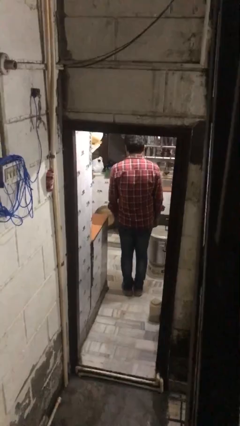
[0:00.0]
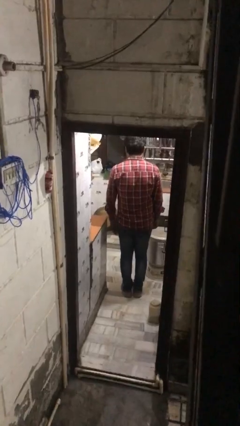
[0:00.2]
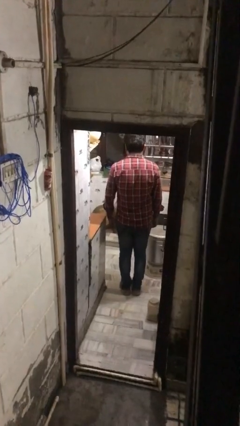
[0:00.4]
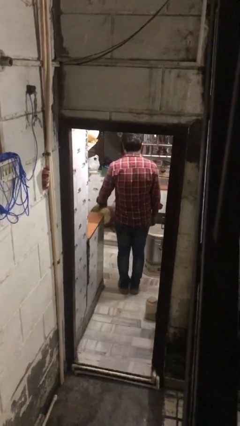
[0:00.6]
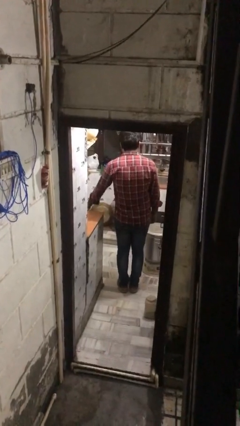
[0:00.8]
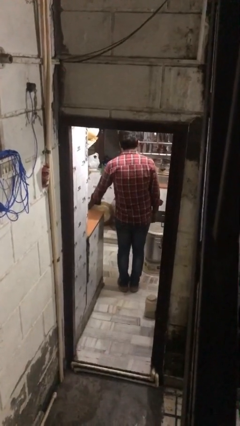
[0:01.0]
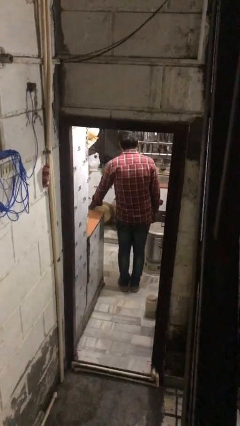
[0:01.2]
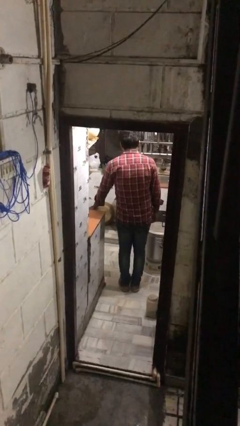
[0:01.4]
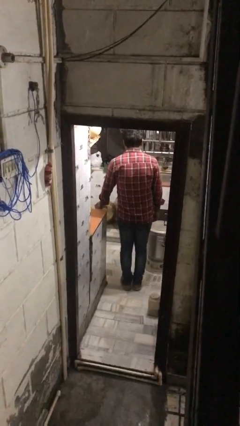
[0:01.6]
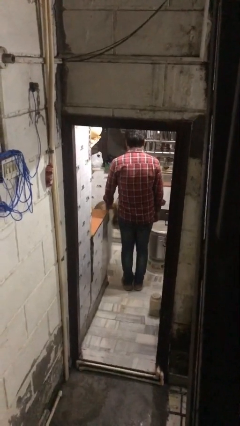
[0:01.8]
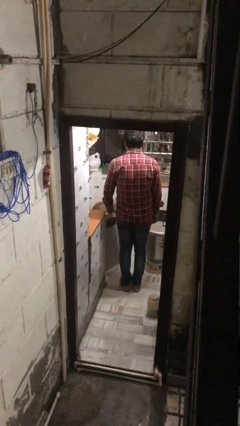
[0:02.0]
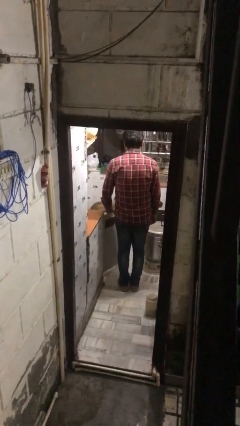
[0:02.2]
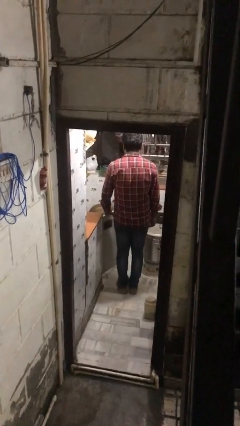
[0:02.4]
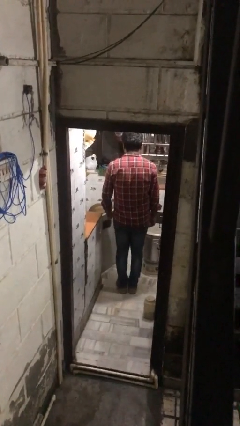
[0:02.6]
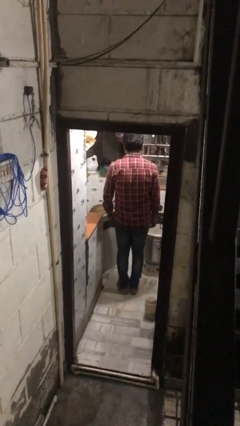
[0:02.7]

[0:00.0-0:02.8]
person opens kitchen drawer

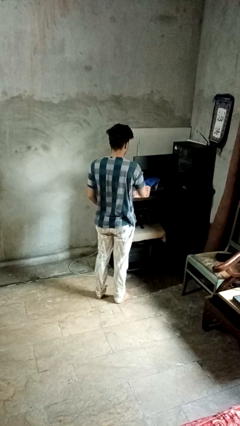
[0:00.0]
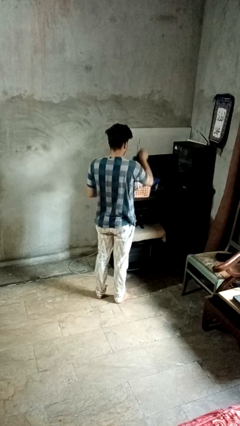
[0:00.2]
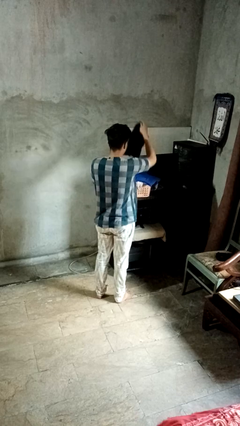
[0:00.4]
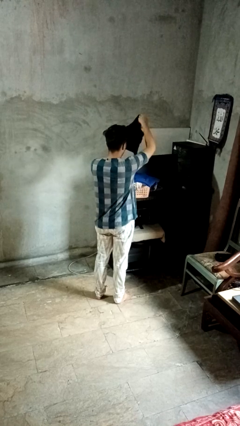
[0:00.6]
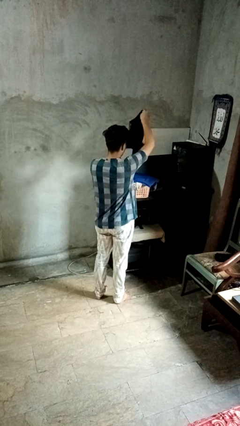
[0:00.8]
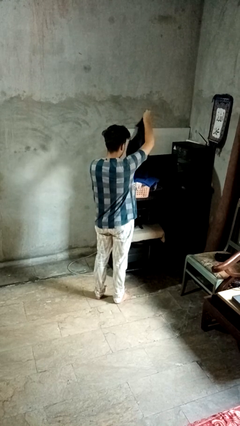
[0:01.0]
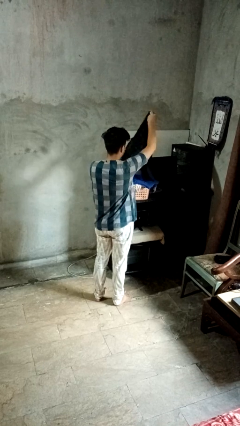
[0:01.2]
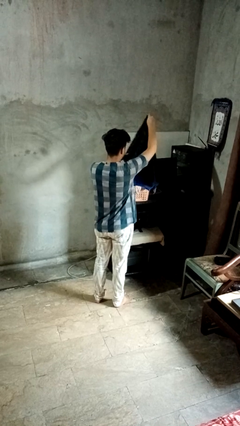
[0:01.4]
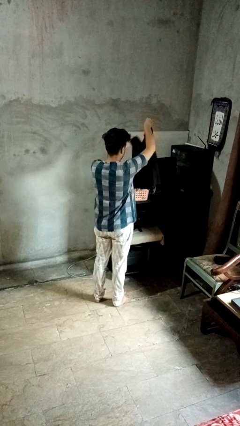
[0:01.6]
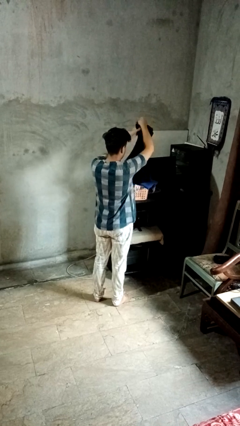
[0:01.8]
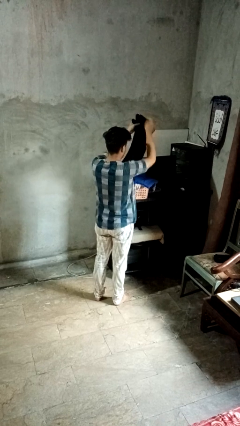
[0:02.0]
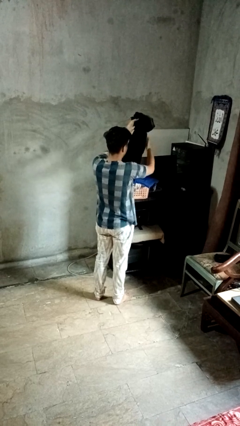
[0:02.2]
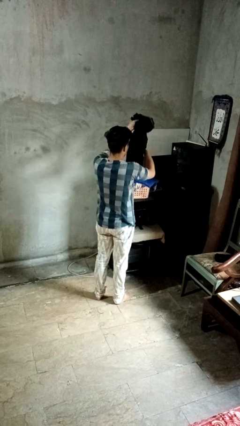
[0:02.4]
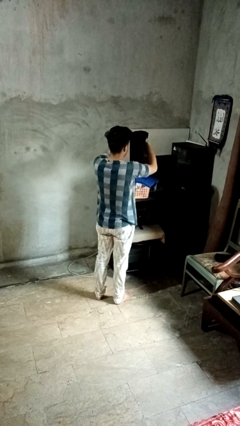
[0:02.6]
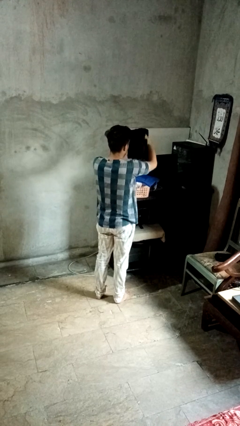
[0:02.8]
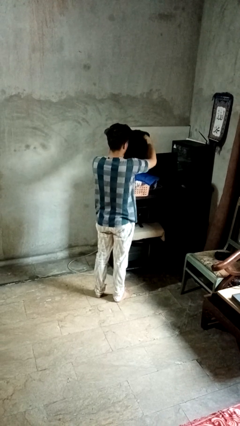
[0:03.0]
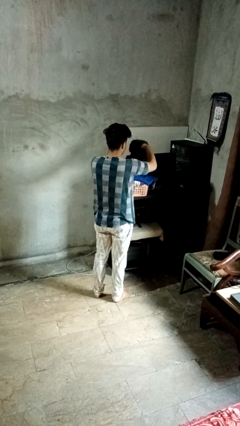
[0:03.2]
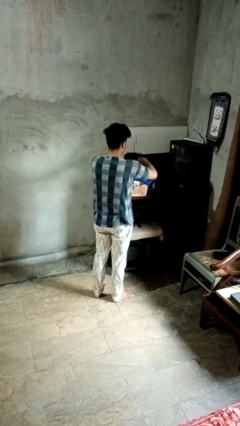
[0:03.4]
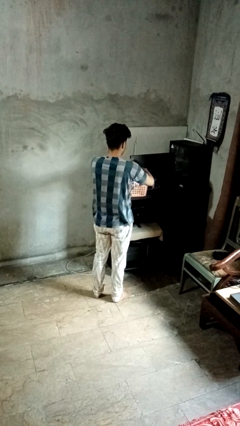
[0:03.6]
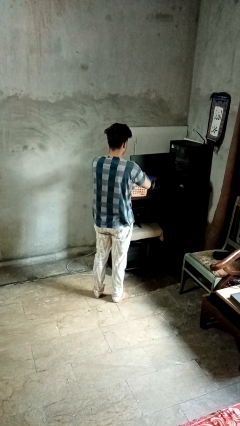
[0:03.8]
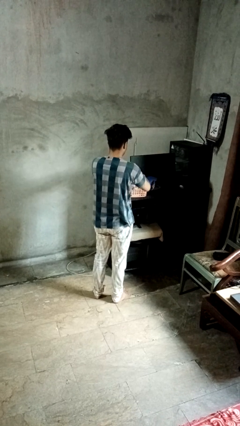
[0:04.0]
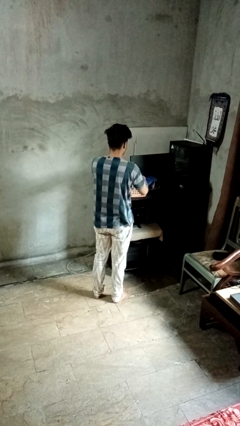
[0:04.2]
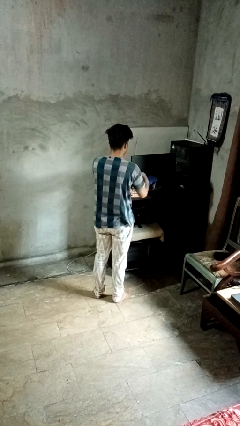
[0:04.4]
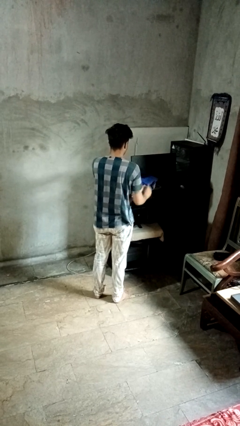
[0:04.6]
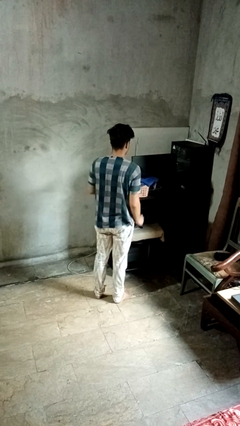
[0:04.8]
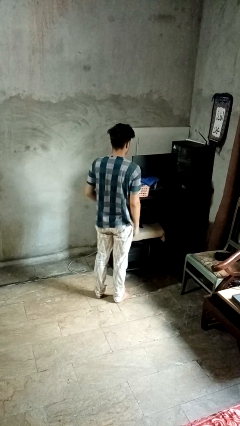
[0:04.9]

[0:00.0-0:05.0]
person folds shirt

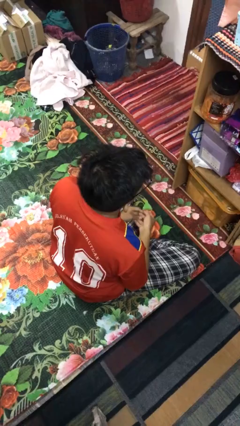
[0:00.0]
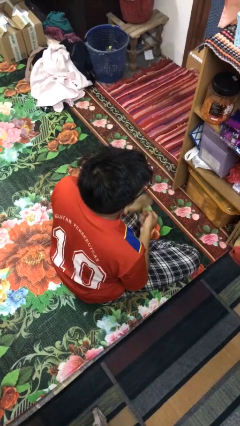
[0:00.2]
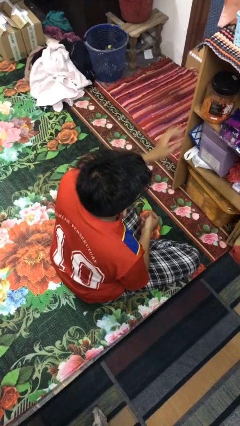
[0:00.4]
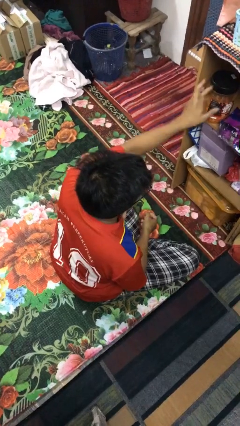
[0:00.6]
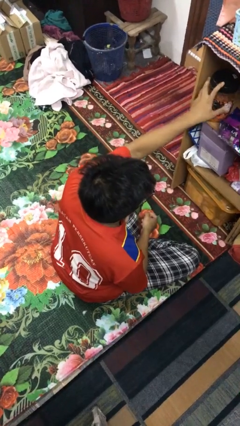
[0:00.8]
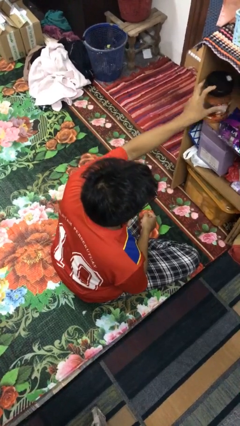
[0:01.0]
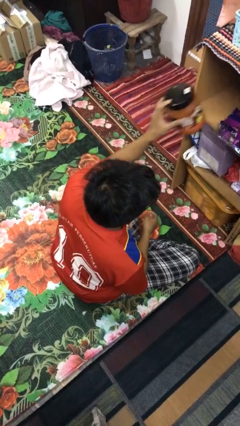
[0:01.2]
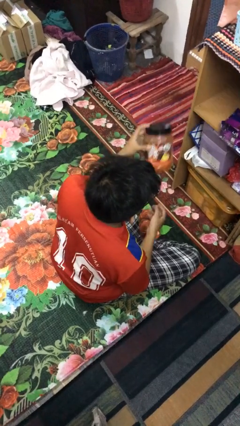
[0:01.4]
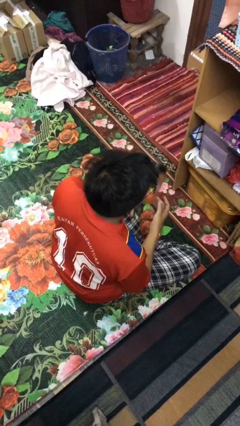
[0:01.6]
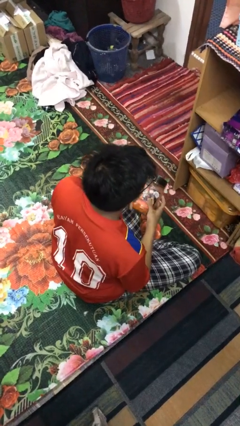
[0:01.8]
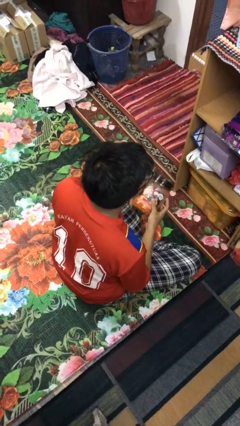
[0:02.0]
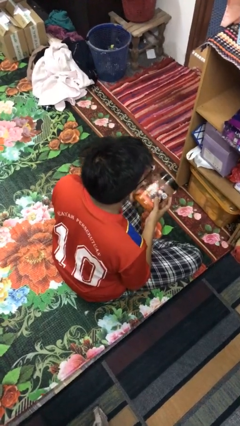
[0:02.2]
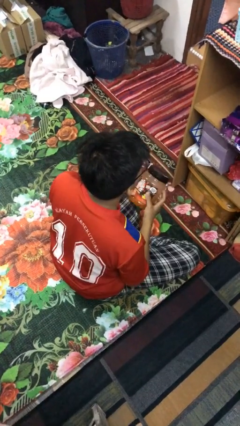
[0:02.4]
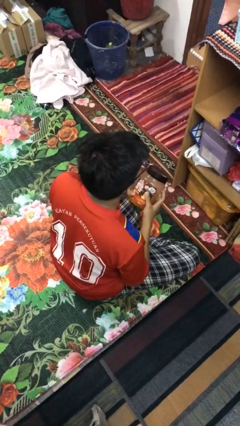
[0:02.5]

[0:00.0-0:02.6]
person picks up object from cabinet

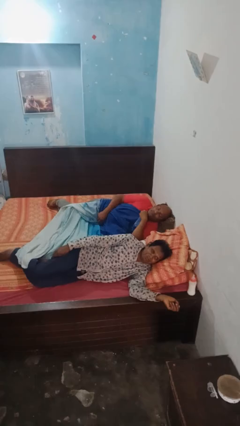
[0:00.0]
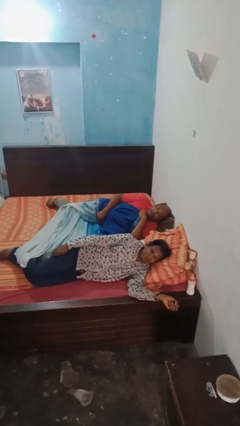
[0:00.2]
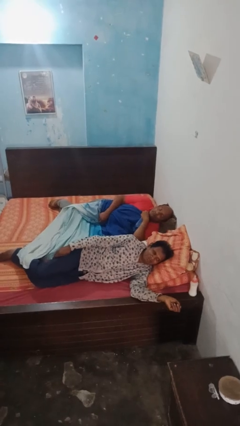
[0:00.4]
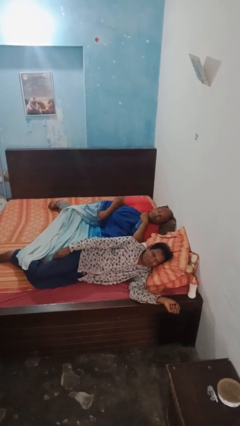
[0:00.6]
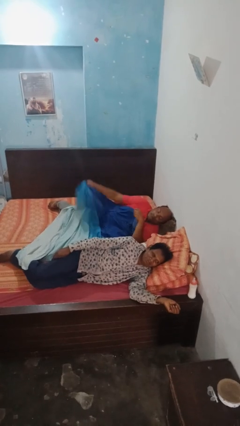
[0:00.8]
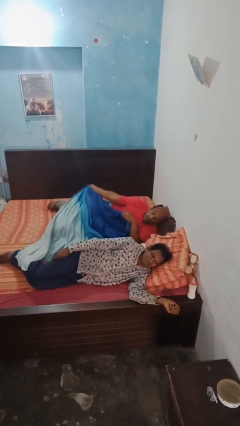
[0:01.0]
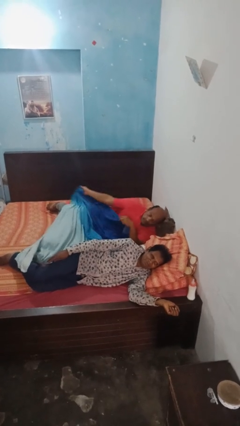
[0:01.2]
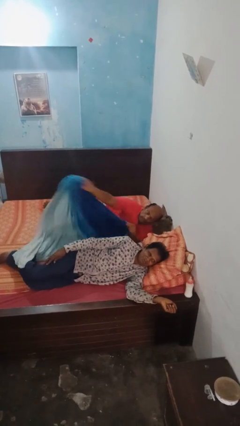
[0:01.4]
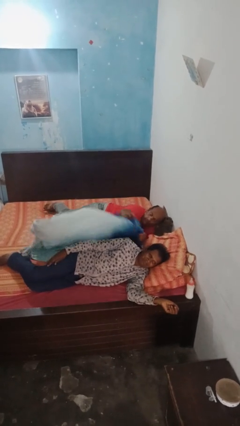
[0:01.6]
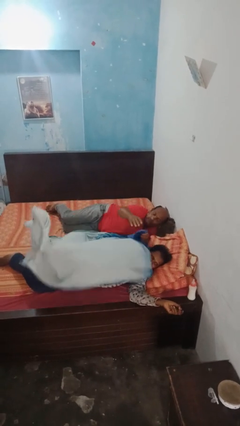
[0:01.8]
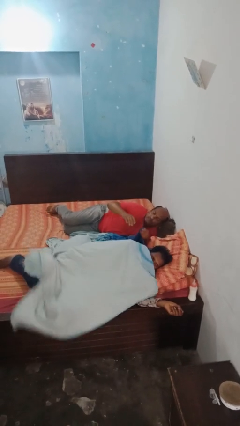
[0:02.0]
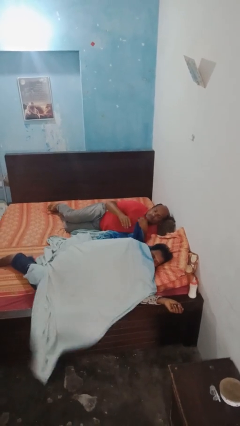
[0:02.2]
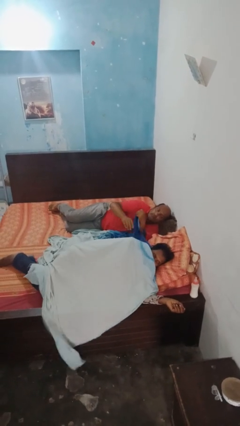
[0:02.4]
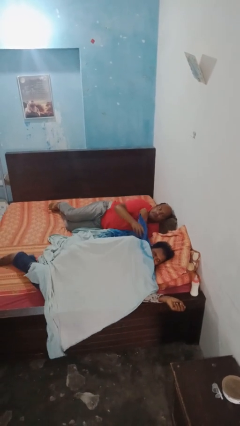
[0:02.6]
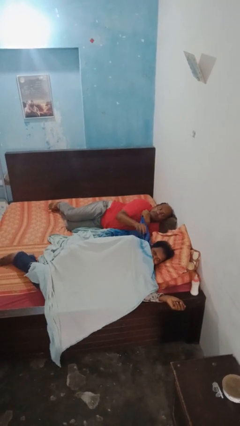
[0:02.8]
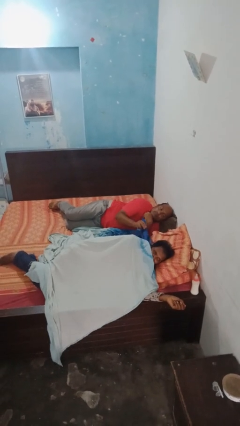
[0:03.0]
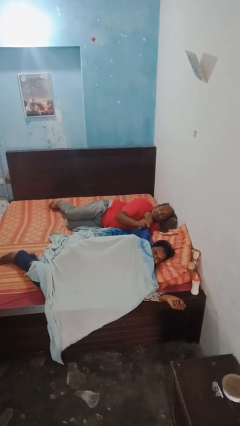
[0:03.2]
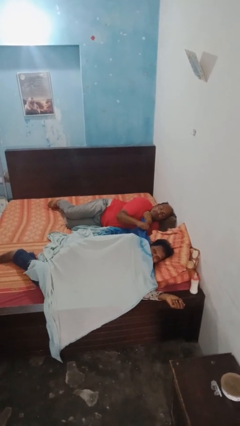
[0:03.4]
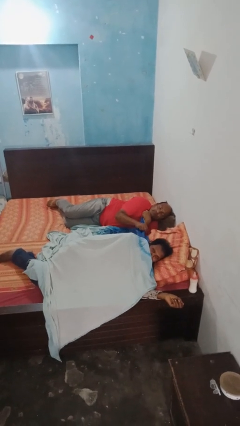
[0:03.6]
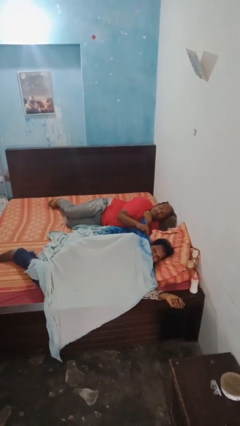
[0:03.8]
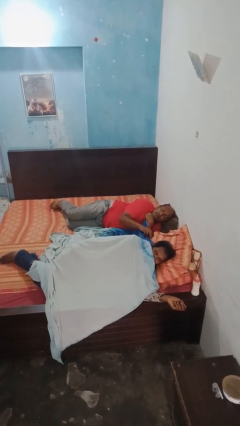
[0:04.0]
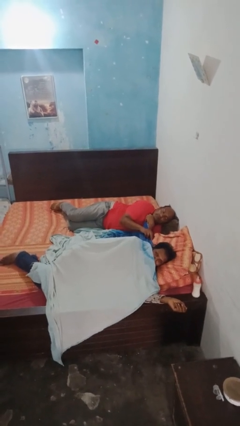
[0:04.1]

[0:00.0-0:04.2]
person covers friend with blanket

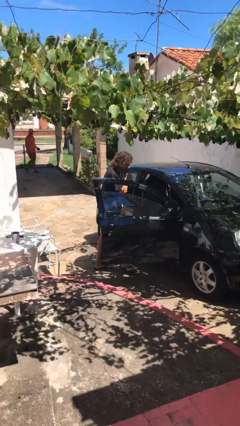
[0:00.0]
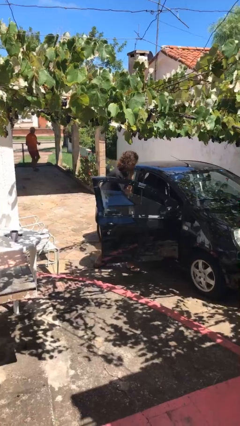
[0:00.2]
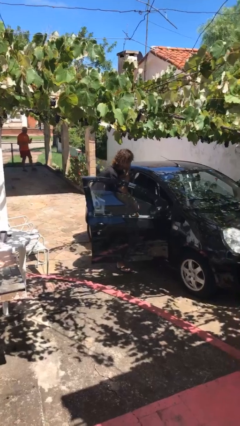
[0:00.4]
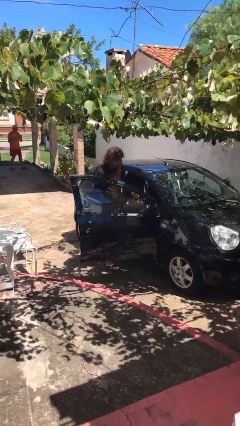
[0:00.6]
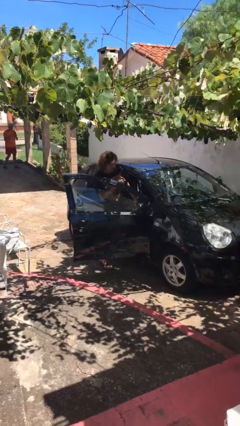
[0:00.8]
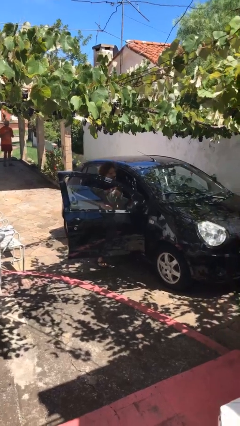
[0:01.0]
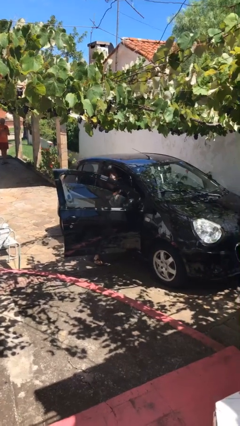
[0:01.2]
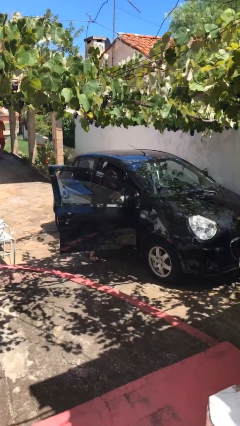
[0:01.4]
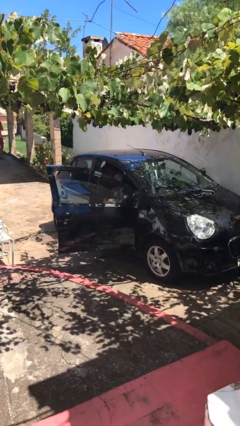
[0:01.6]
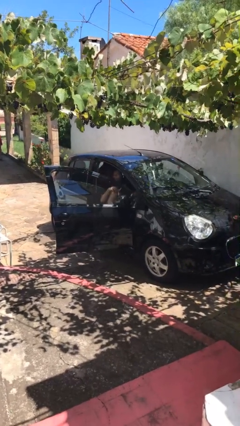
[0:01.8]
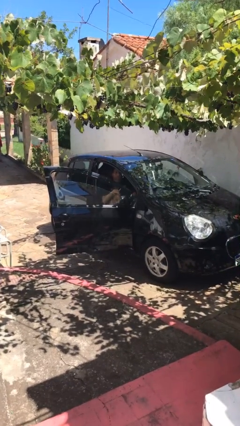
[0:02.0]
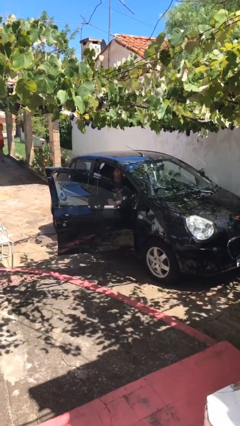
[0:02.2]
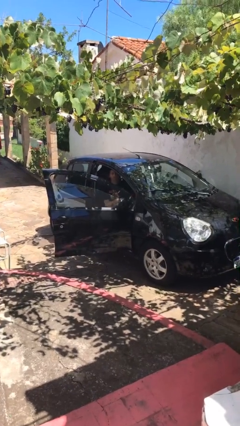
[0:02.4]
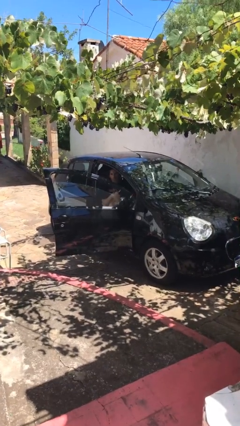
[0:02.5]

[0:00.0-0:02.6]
person enters car

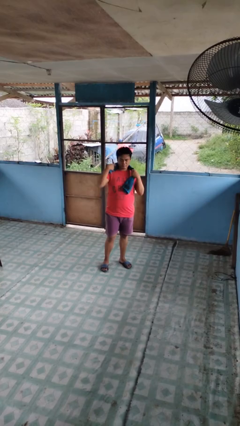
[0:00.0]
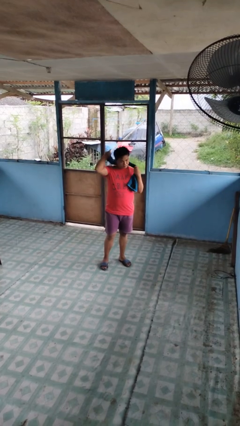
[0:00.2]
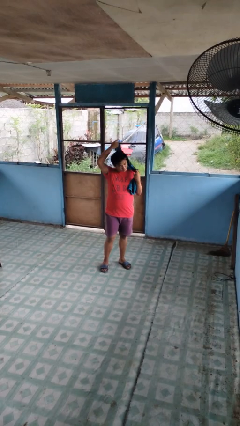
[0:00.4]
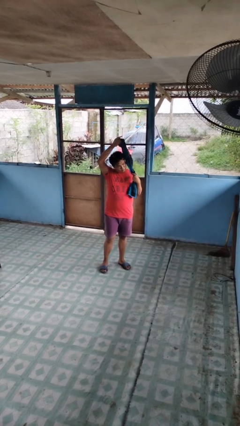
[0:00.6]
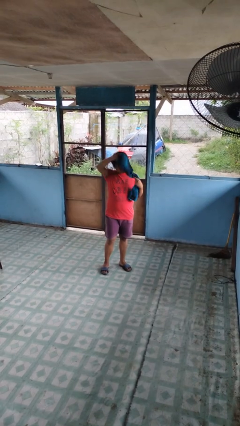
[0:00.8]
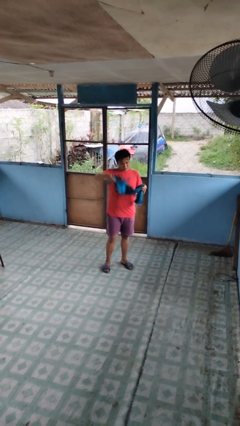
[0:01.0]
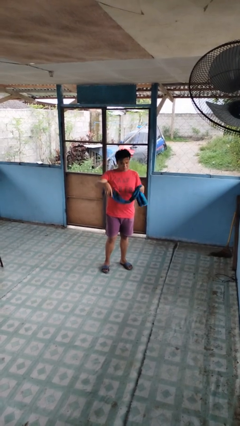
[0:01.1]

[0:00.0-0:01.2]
person takes off scarf
